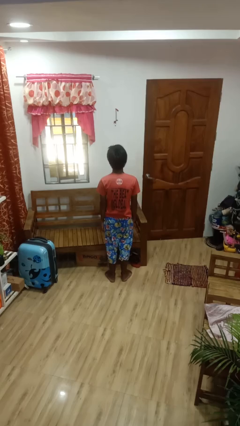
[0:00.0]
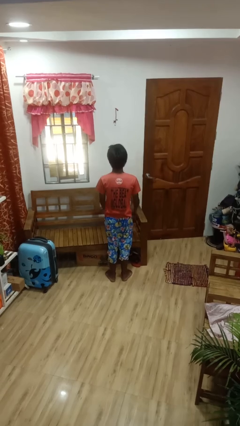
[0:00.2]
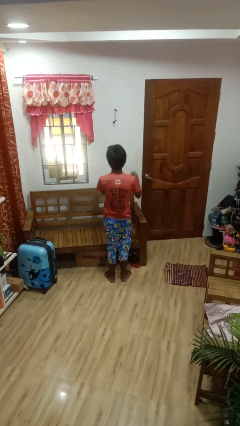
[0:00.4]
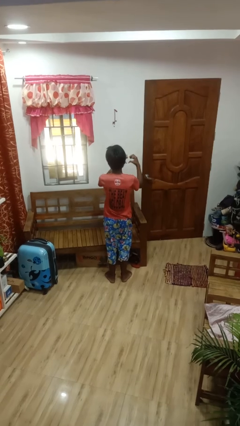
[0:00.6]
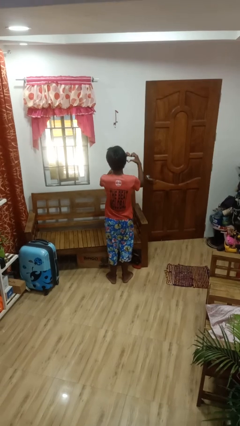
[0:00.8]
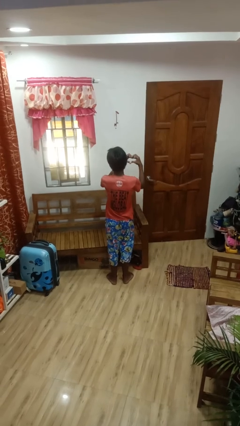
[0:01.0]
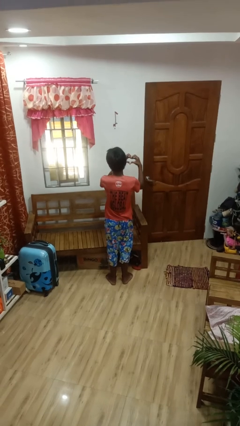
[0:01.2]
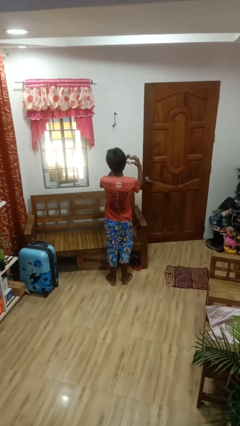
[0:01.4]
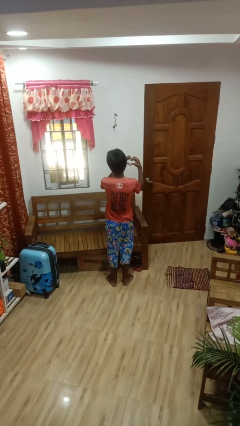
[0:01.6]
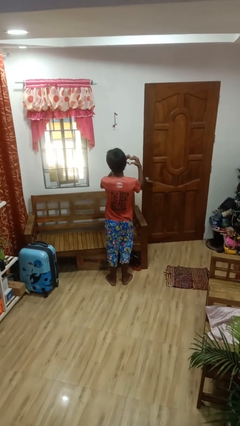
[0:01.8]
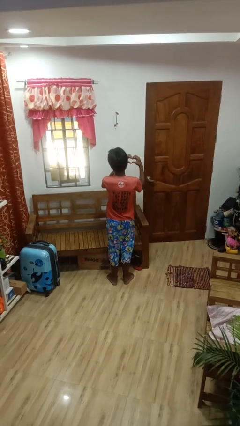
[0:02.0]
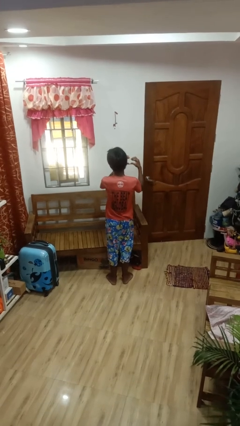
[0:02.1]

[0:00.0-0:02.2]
person gestures heart

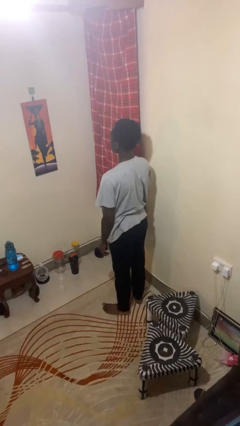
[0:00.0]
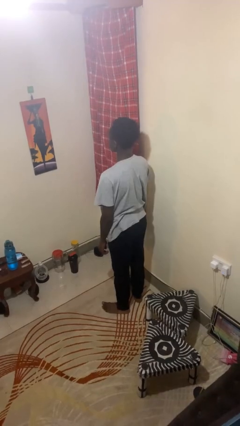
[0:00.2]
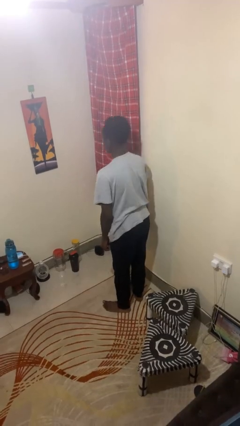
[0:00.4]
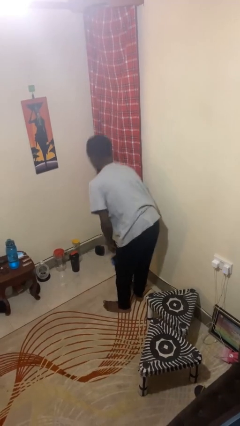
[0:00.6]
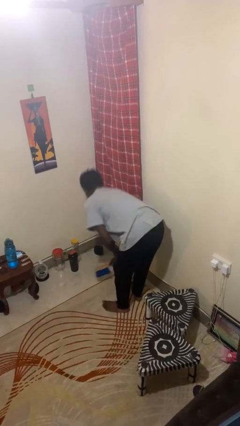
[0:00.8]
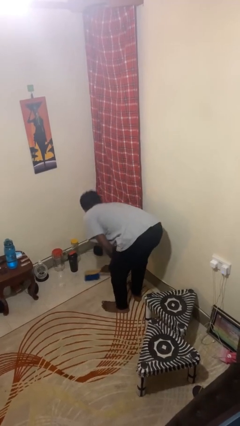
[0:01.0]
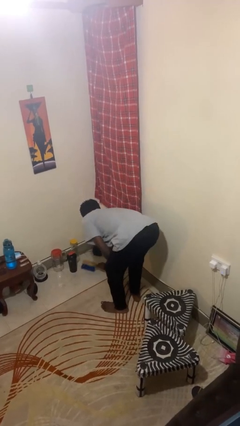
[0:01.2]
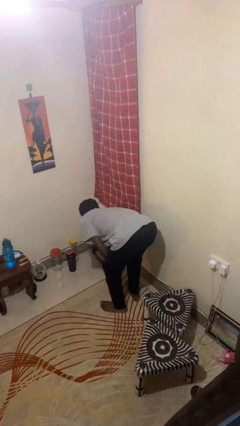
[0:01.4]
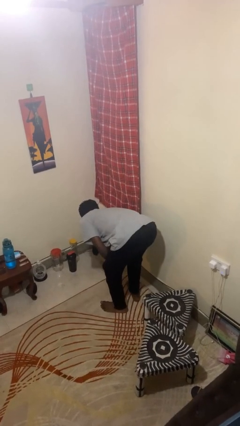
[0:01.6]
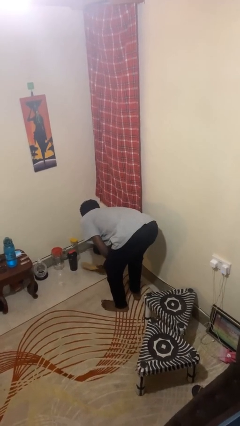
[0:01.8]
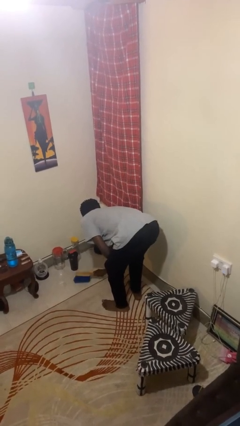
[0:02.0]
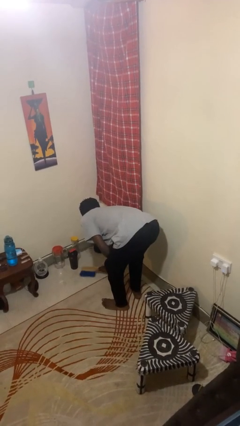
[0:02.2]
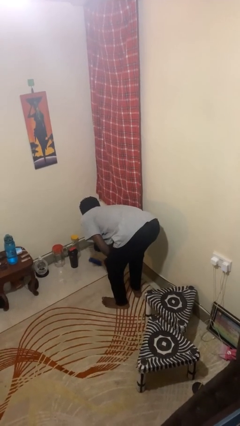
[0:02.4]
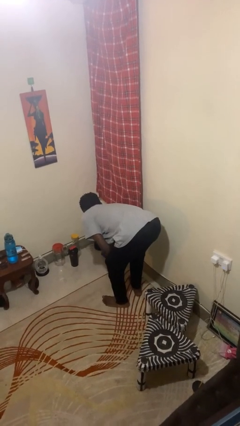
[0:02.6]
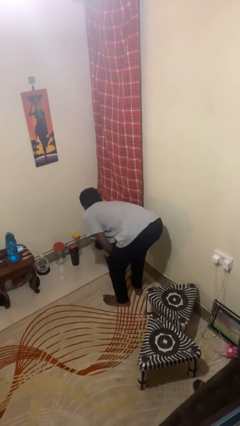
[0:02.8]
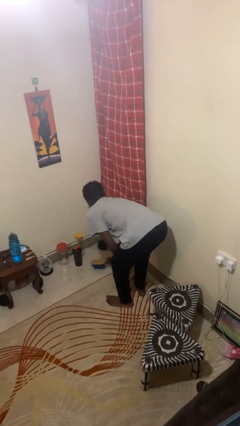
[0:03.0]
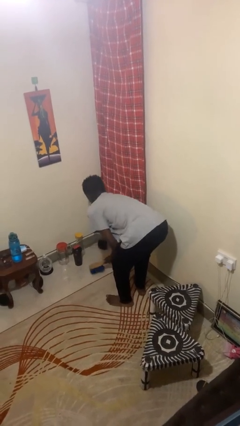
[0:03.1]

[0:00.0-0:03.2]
person sweeps floor

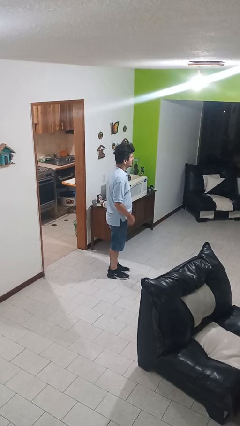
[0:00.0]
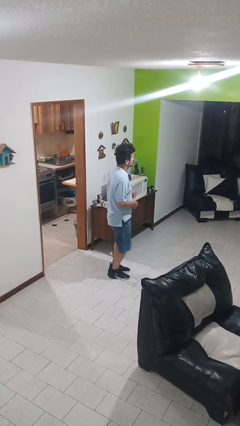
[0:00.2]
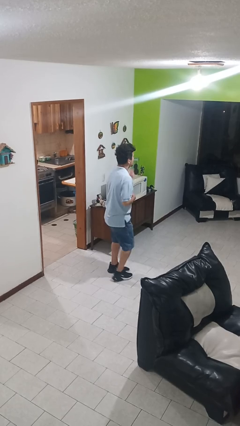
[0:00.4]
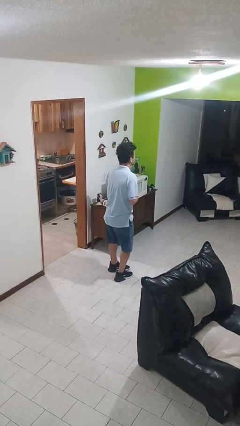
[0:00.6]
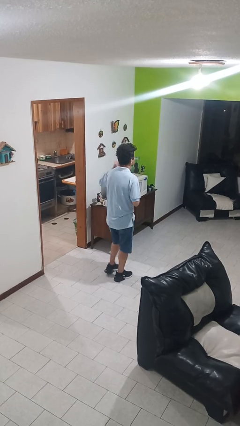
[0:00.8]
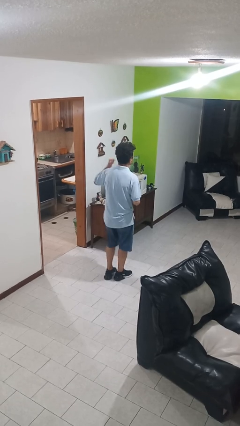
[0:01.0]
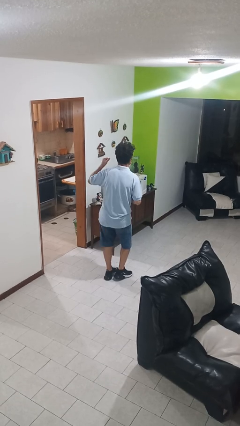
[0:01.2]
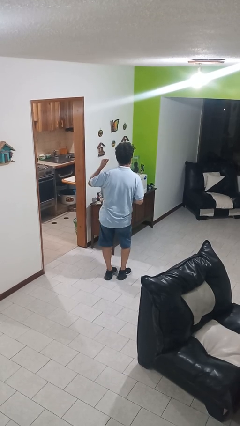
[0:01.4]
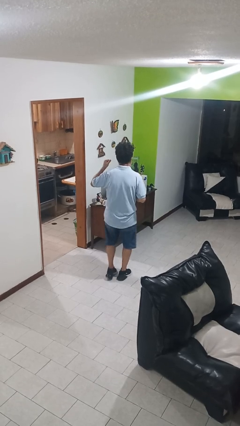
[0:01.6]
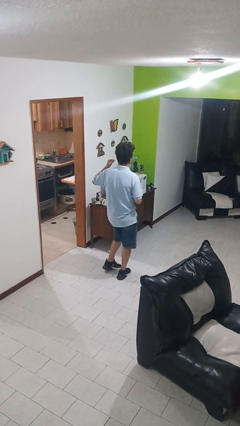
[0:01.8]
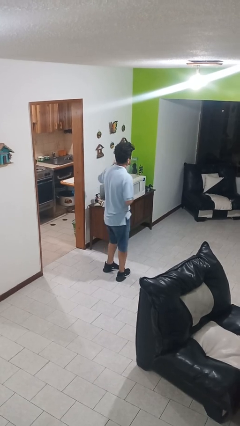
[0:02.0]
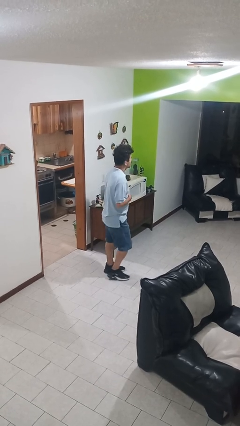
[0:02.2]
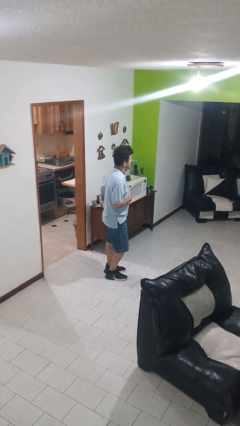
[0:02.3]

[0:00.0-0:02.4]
person dances in place

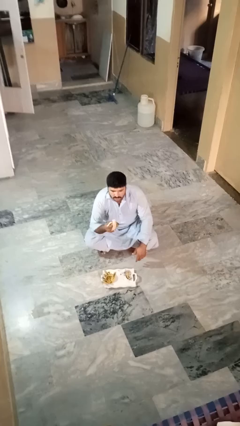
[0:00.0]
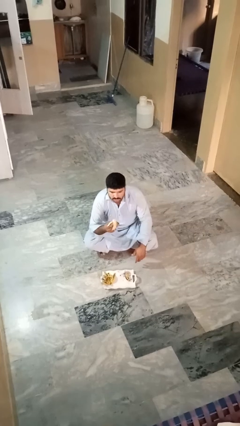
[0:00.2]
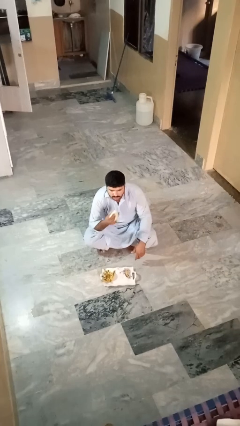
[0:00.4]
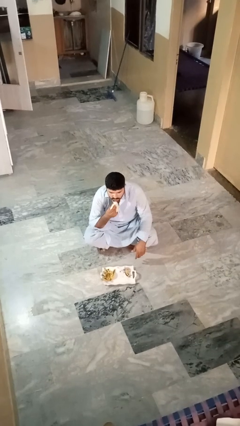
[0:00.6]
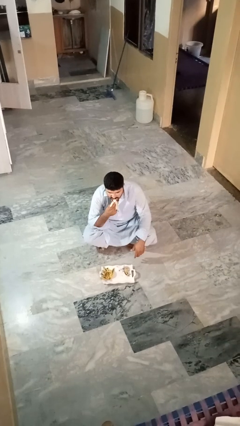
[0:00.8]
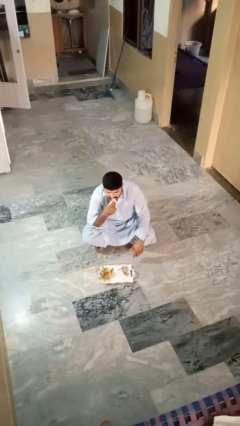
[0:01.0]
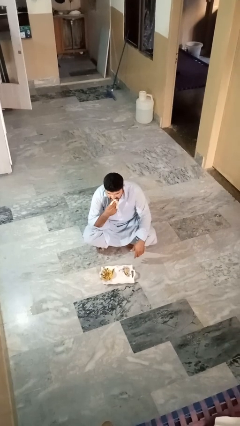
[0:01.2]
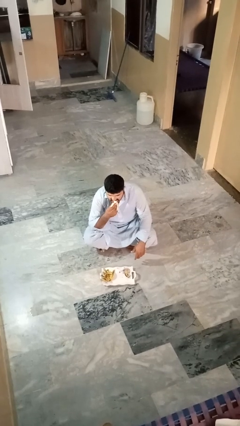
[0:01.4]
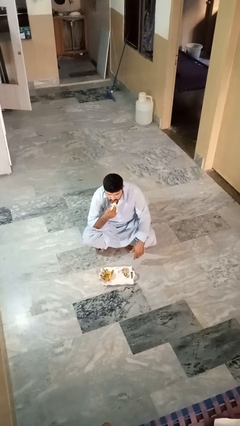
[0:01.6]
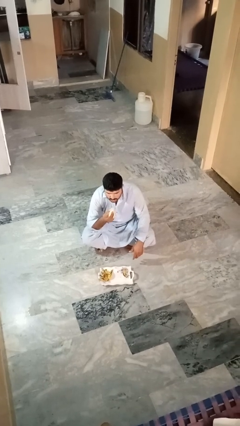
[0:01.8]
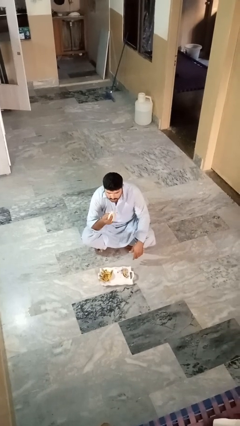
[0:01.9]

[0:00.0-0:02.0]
person eats banana

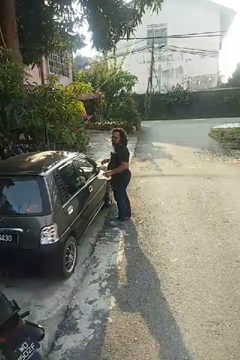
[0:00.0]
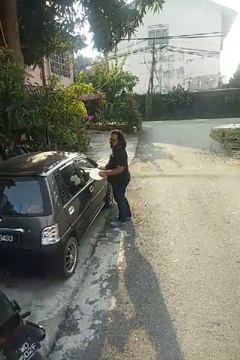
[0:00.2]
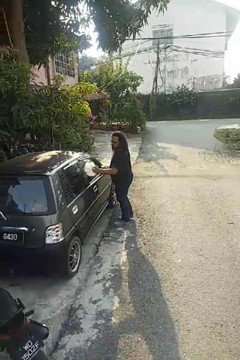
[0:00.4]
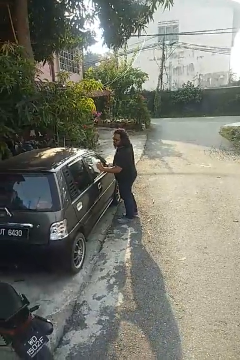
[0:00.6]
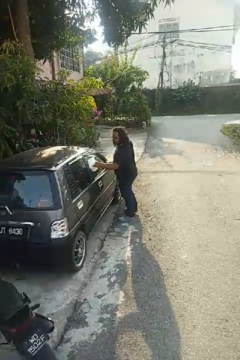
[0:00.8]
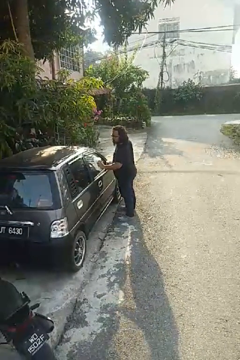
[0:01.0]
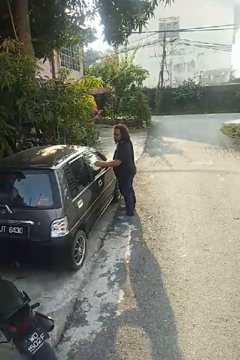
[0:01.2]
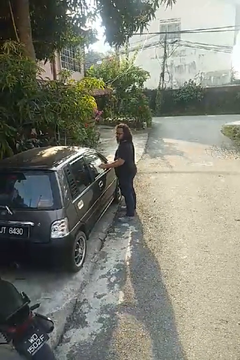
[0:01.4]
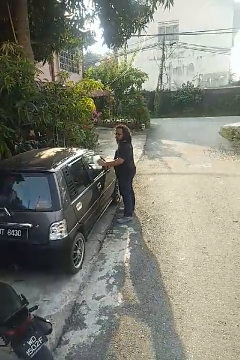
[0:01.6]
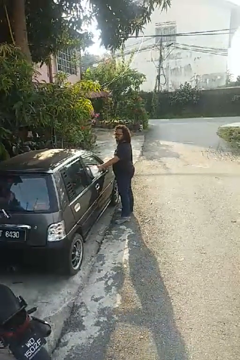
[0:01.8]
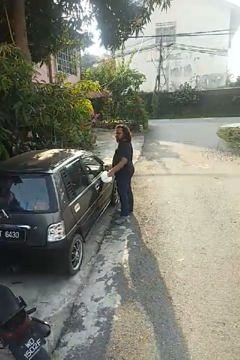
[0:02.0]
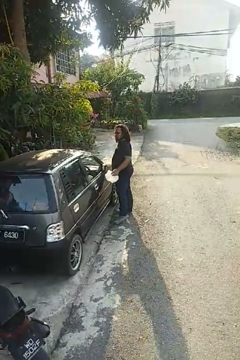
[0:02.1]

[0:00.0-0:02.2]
person polishes car with rag

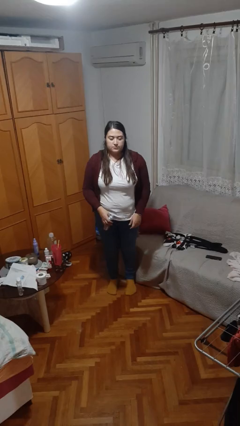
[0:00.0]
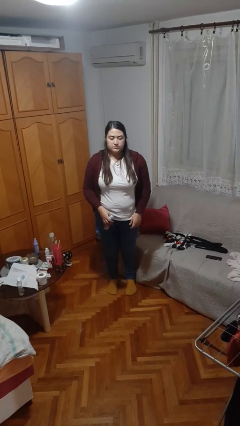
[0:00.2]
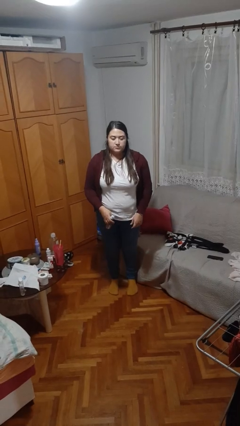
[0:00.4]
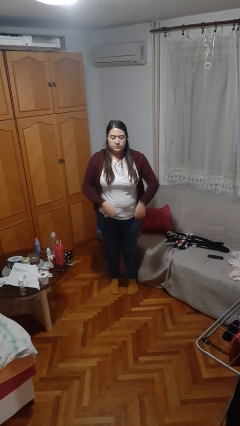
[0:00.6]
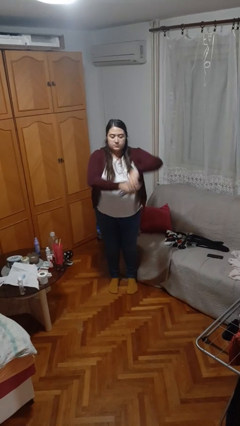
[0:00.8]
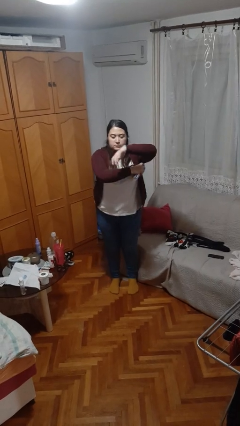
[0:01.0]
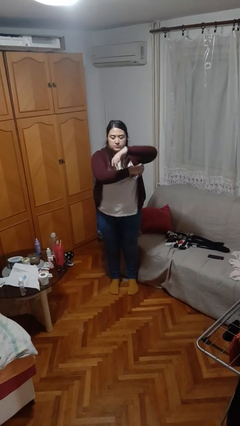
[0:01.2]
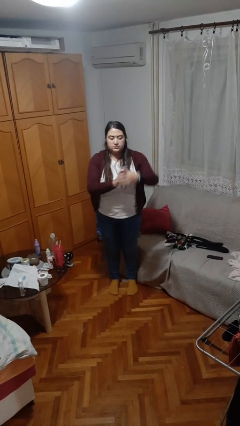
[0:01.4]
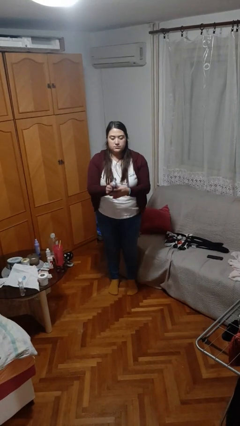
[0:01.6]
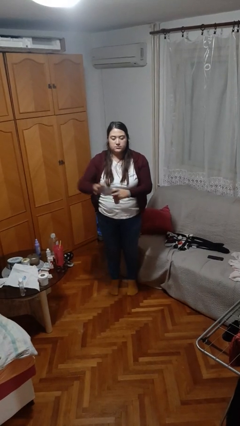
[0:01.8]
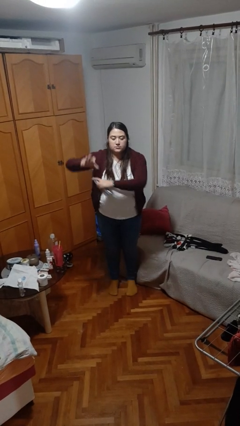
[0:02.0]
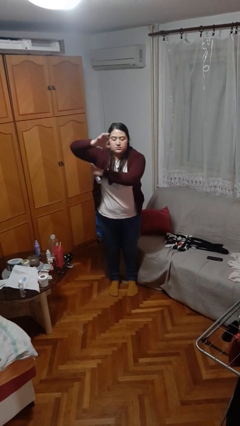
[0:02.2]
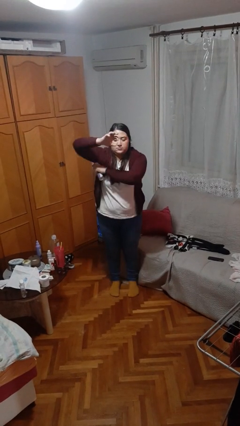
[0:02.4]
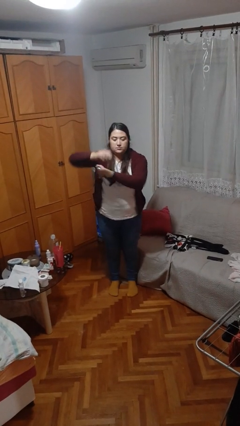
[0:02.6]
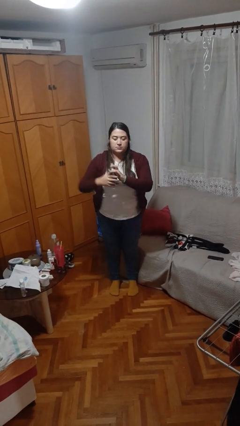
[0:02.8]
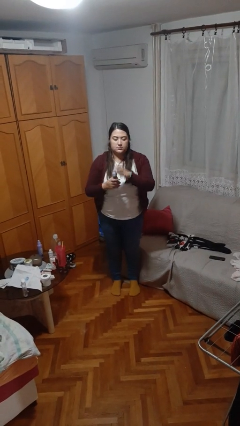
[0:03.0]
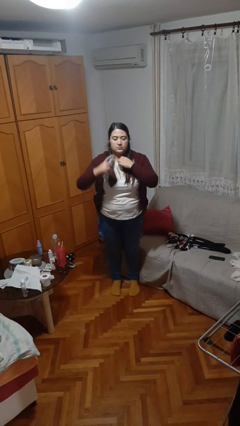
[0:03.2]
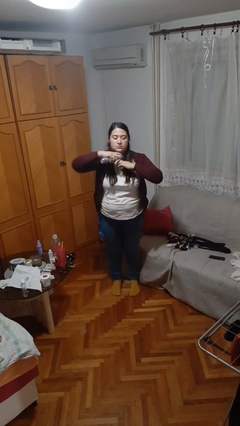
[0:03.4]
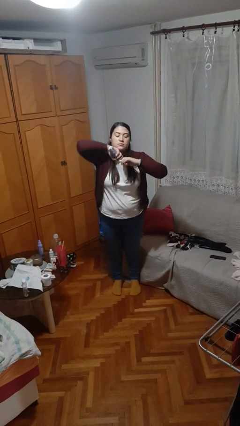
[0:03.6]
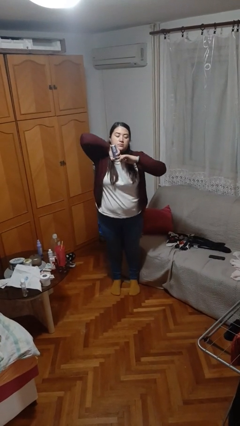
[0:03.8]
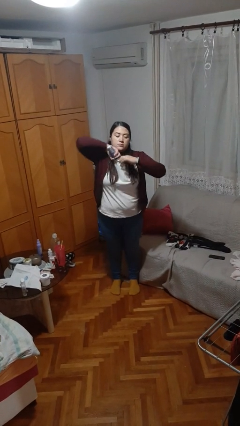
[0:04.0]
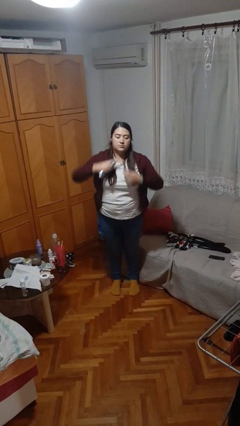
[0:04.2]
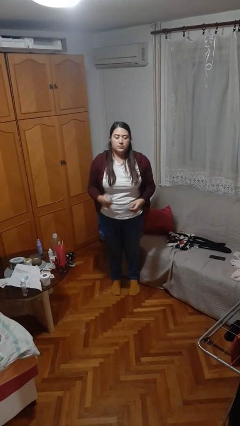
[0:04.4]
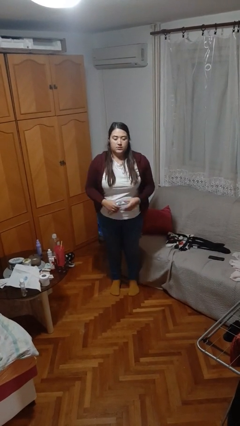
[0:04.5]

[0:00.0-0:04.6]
person applies deodorant

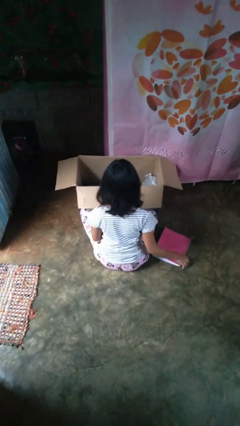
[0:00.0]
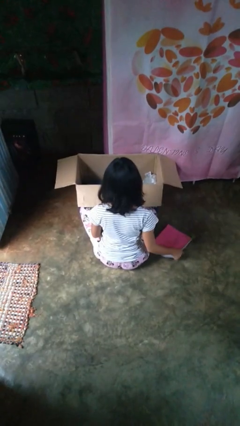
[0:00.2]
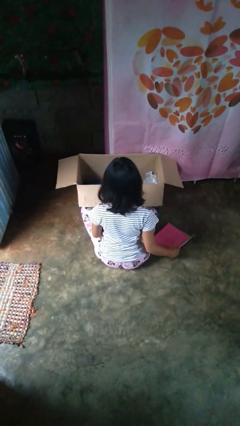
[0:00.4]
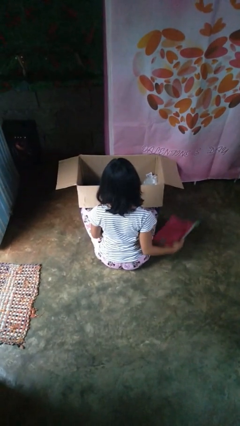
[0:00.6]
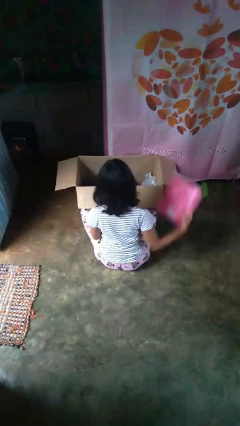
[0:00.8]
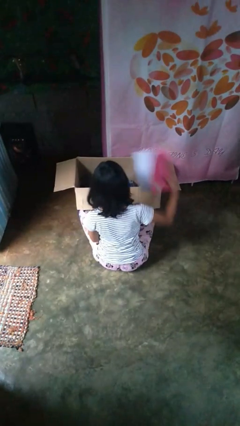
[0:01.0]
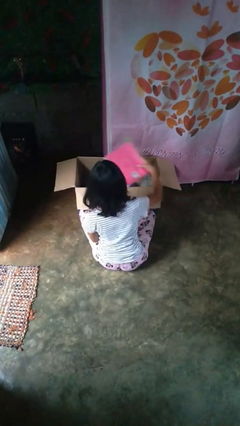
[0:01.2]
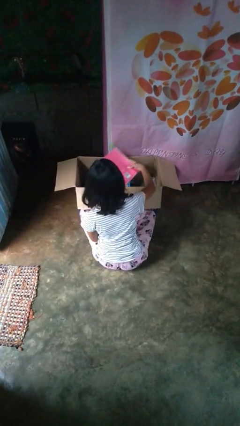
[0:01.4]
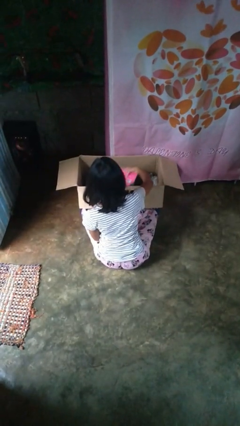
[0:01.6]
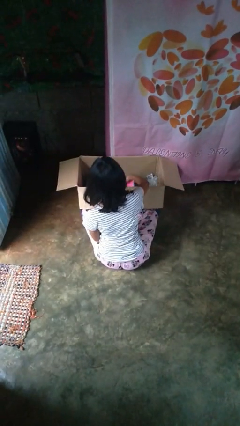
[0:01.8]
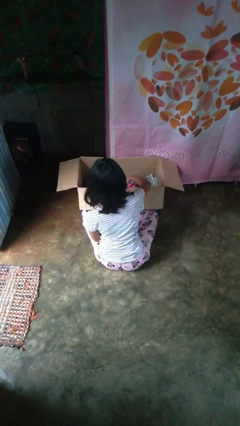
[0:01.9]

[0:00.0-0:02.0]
person puts object into box
